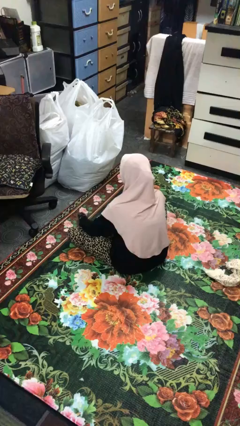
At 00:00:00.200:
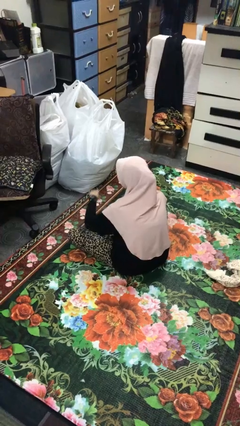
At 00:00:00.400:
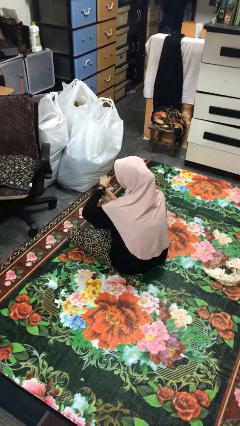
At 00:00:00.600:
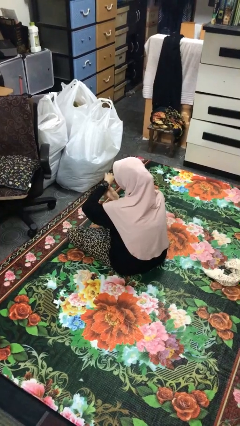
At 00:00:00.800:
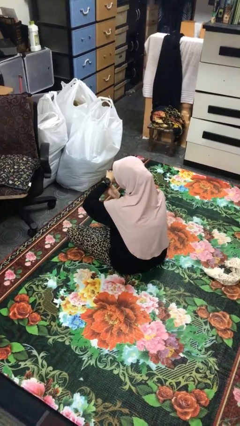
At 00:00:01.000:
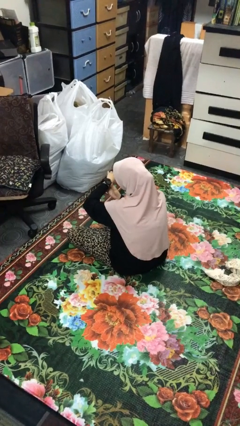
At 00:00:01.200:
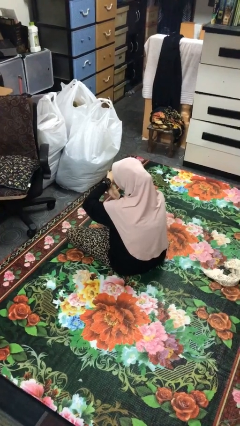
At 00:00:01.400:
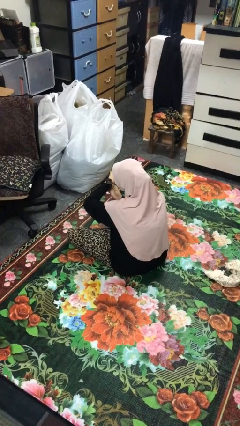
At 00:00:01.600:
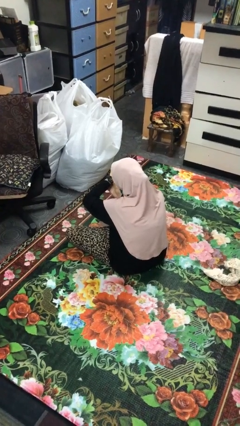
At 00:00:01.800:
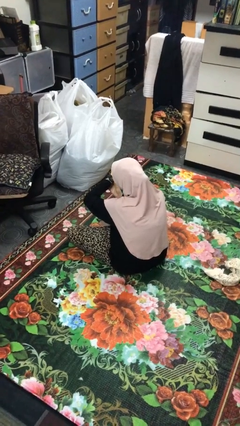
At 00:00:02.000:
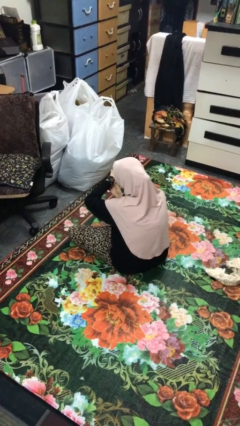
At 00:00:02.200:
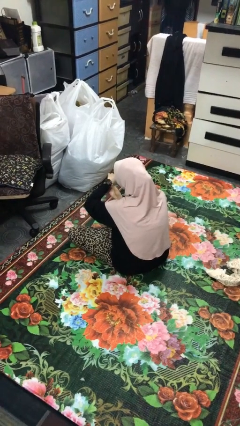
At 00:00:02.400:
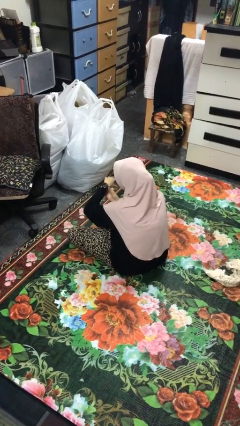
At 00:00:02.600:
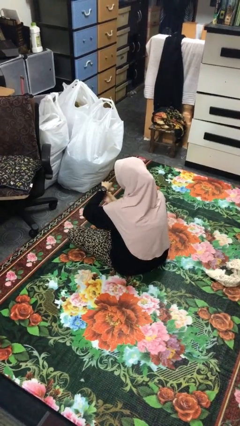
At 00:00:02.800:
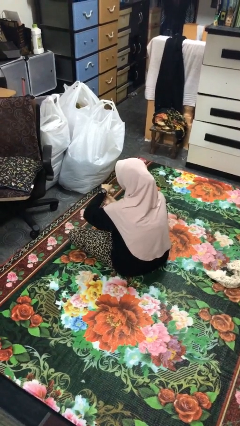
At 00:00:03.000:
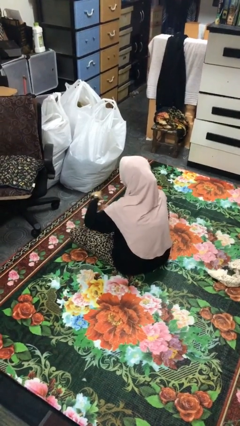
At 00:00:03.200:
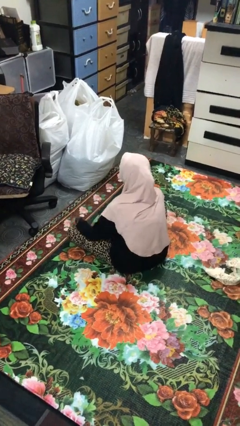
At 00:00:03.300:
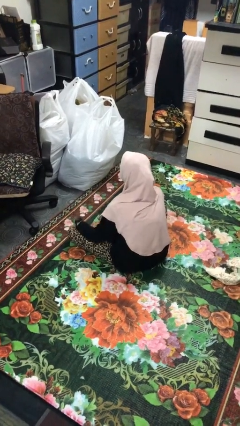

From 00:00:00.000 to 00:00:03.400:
person looks at wristwatch

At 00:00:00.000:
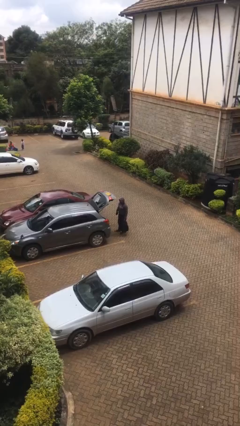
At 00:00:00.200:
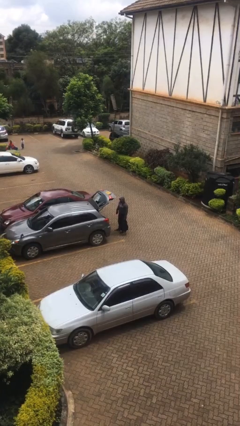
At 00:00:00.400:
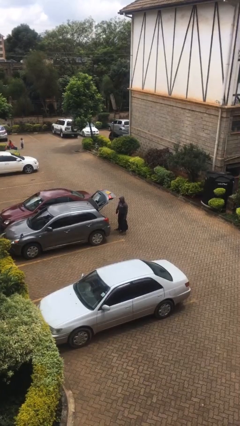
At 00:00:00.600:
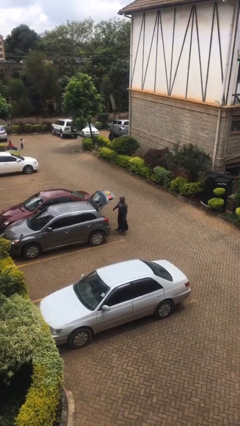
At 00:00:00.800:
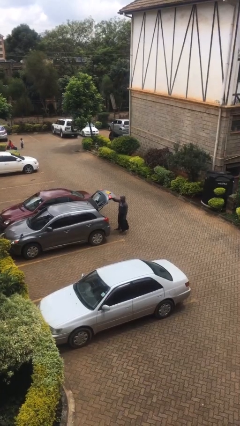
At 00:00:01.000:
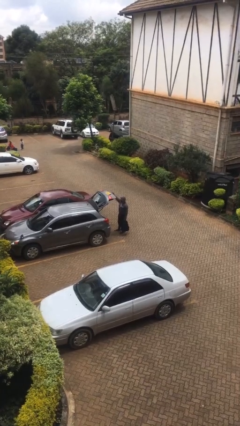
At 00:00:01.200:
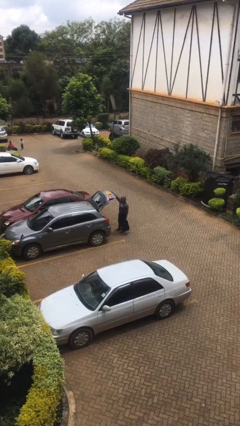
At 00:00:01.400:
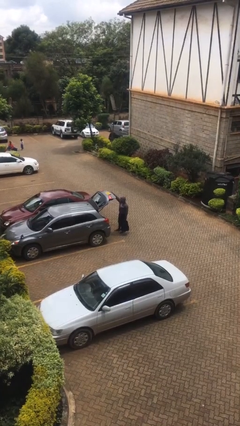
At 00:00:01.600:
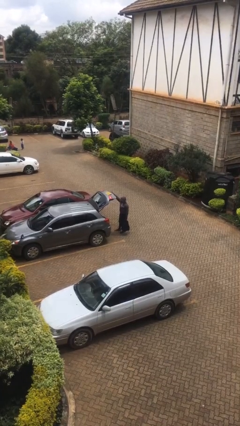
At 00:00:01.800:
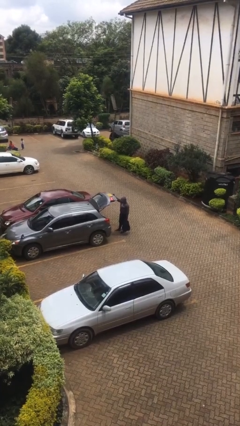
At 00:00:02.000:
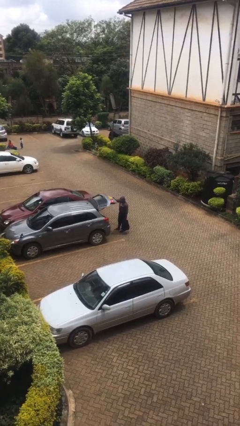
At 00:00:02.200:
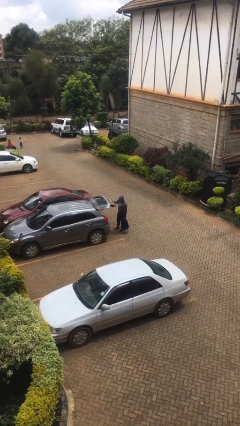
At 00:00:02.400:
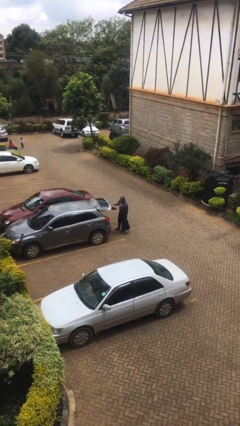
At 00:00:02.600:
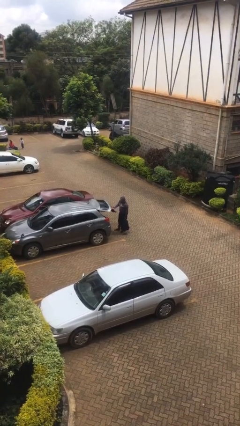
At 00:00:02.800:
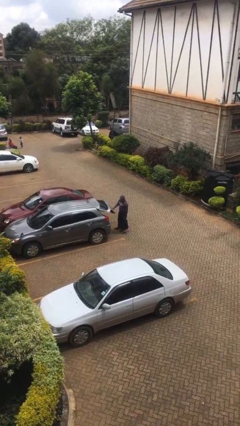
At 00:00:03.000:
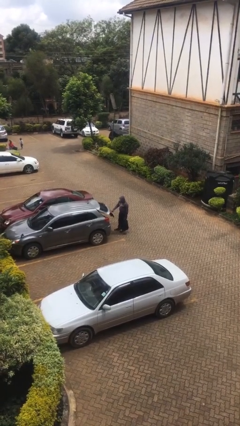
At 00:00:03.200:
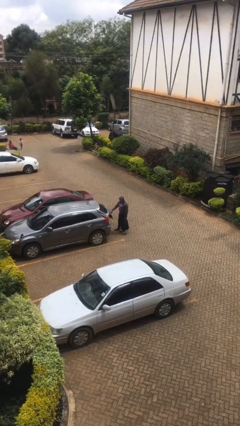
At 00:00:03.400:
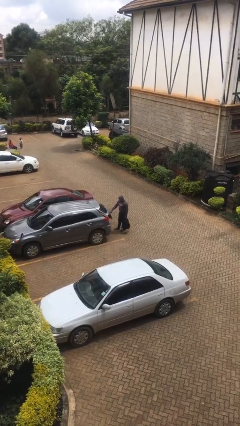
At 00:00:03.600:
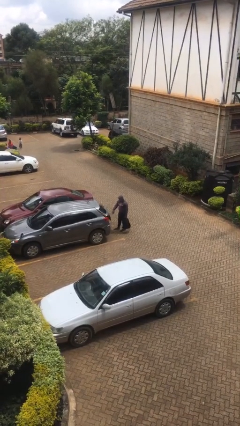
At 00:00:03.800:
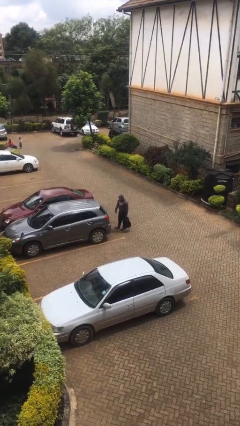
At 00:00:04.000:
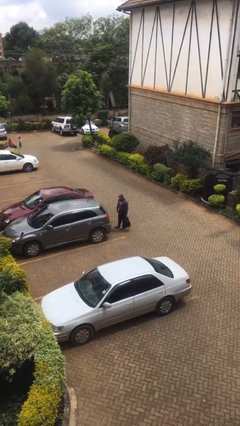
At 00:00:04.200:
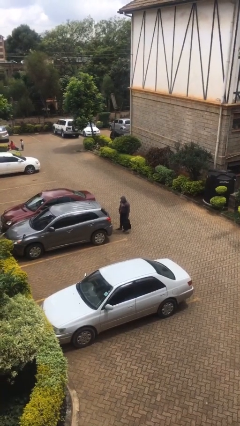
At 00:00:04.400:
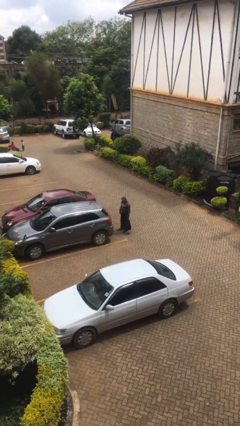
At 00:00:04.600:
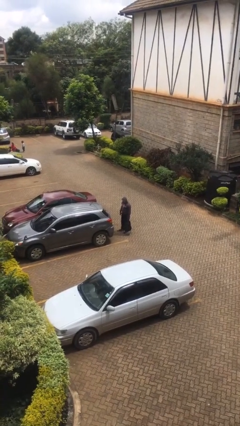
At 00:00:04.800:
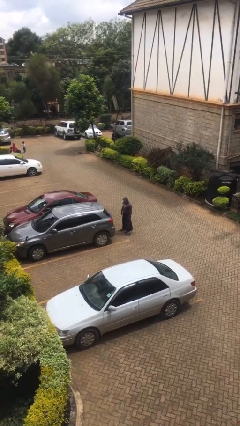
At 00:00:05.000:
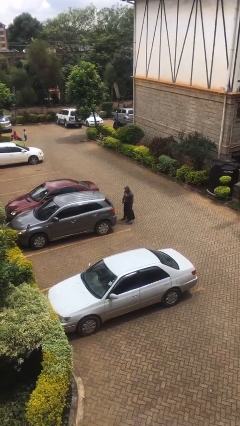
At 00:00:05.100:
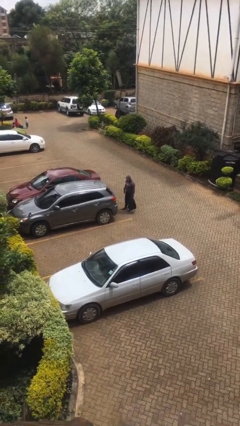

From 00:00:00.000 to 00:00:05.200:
person closes car trunk

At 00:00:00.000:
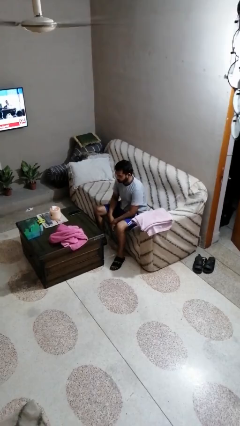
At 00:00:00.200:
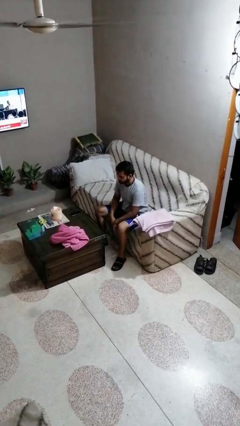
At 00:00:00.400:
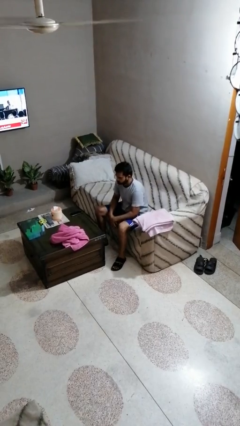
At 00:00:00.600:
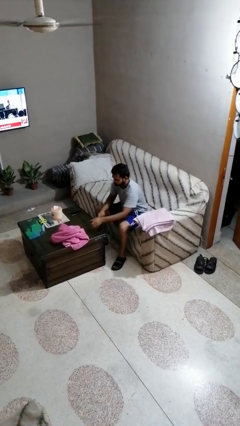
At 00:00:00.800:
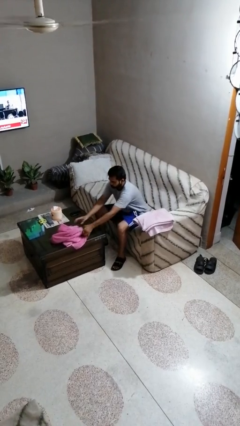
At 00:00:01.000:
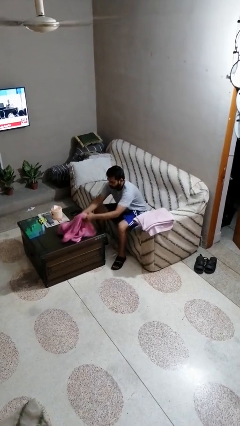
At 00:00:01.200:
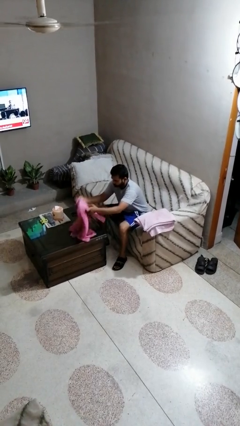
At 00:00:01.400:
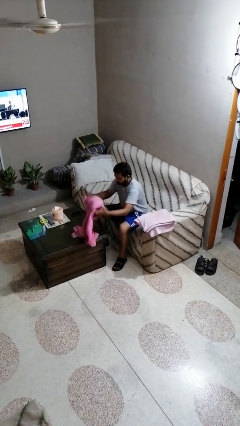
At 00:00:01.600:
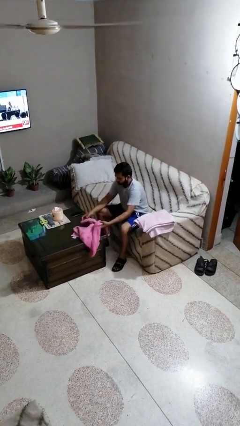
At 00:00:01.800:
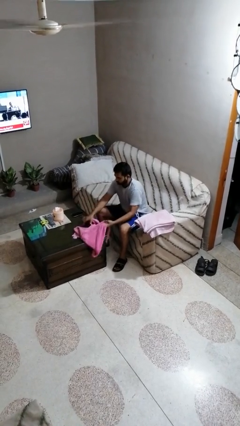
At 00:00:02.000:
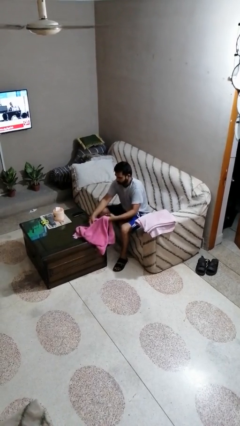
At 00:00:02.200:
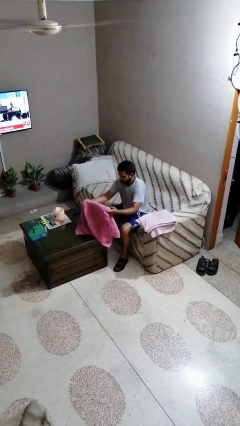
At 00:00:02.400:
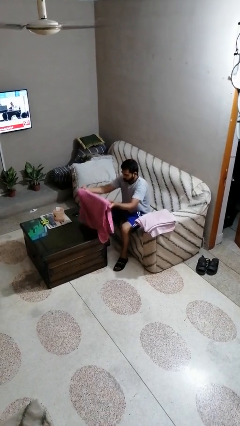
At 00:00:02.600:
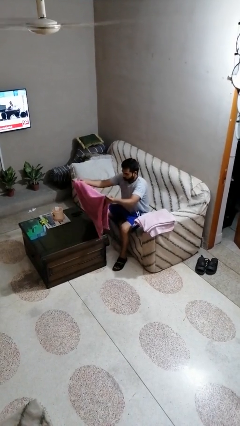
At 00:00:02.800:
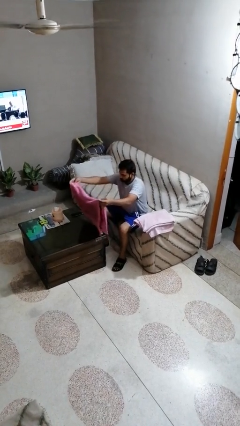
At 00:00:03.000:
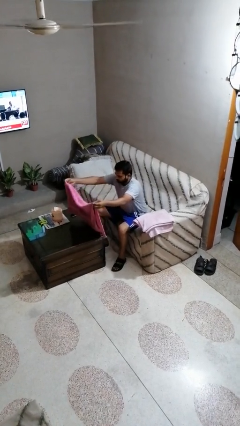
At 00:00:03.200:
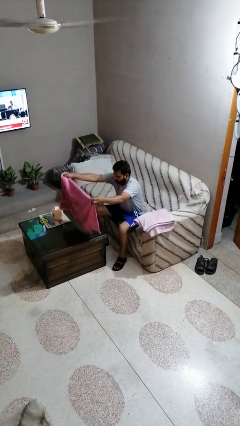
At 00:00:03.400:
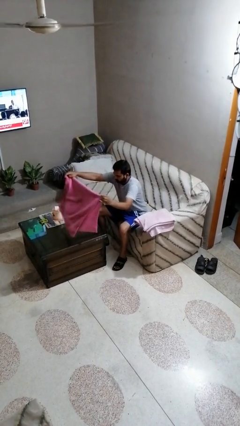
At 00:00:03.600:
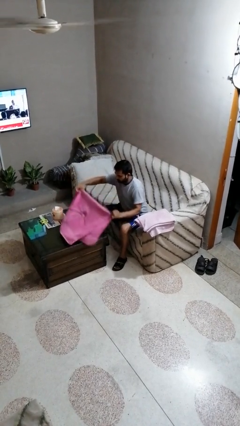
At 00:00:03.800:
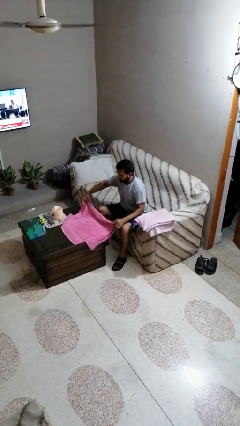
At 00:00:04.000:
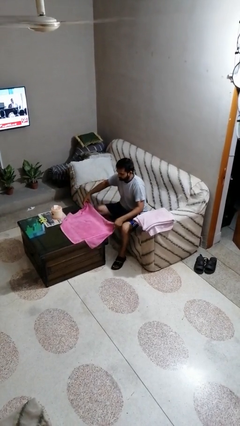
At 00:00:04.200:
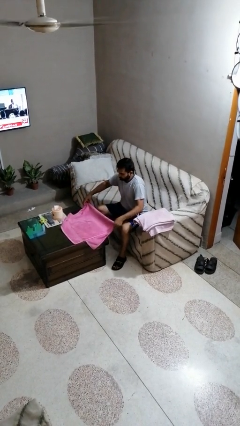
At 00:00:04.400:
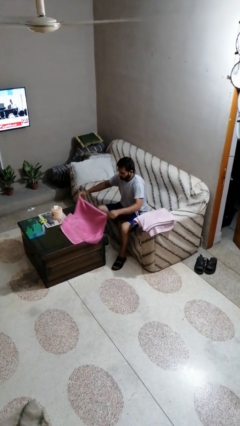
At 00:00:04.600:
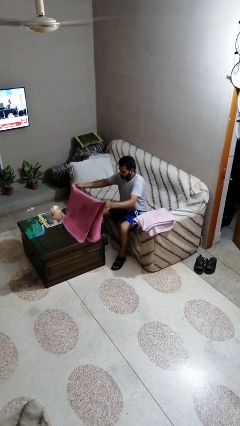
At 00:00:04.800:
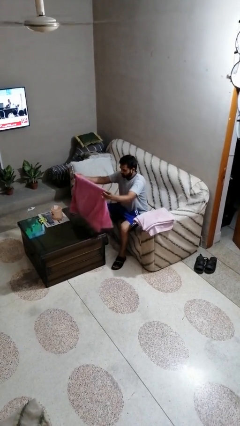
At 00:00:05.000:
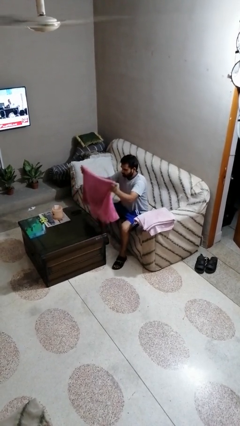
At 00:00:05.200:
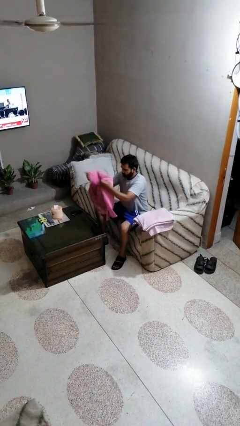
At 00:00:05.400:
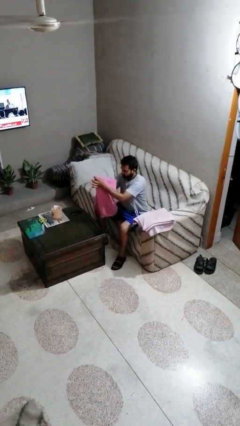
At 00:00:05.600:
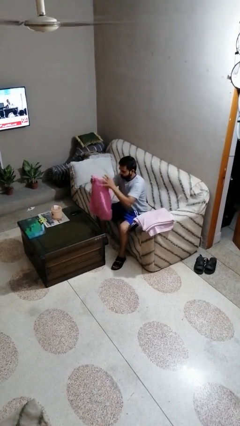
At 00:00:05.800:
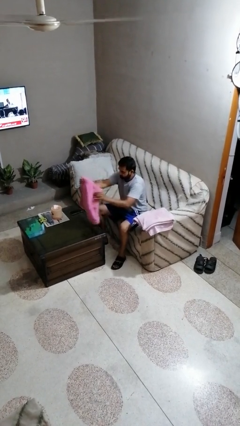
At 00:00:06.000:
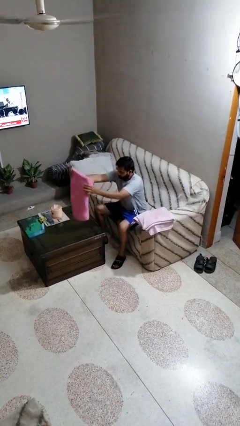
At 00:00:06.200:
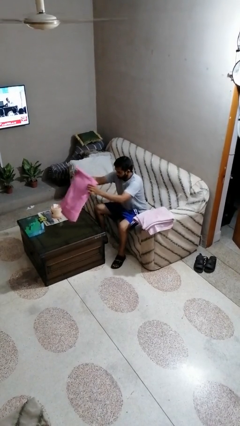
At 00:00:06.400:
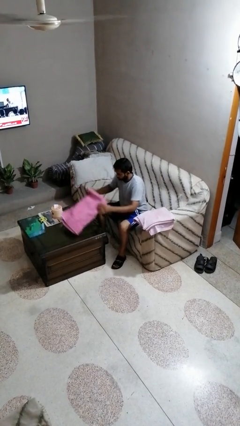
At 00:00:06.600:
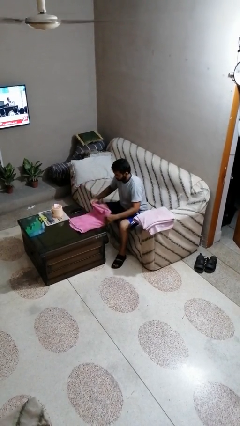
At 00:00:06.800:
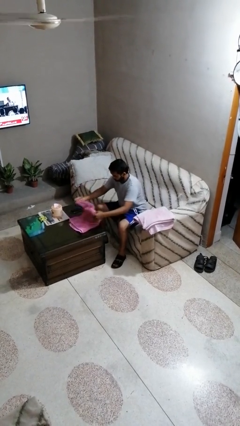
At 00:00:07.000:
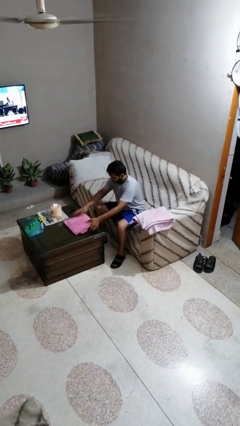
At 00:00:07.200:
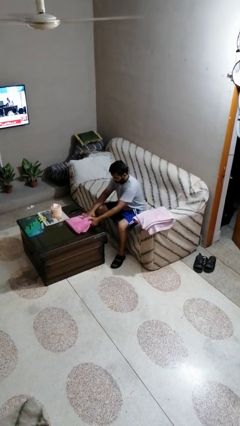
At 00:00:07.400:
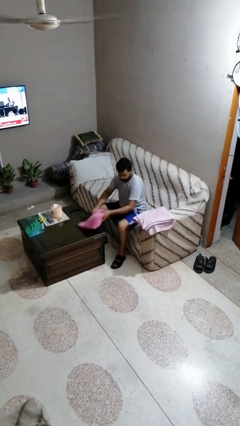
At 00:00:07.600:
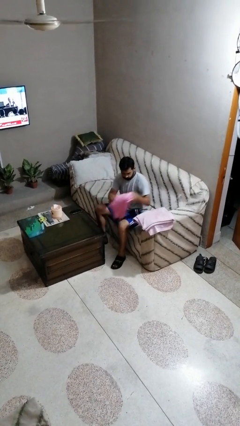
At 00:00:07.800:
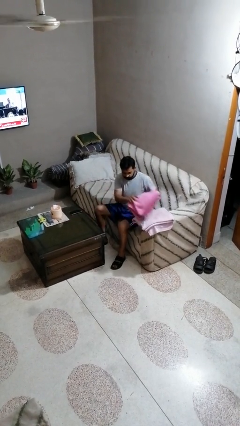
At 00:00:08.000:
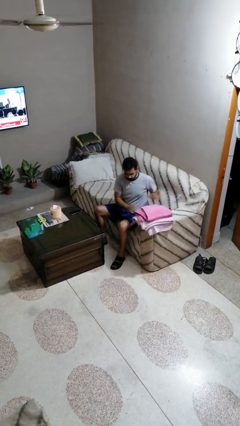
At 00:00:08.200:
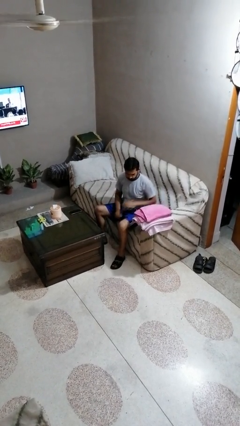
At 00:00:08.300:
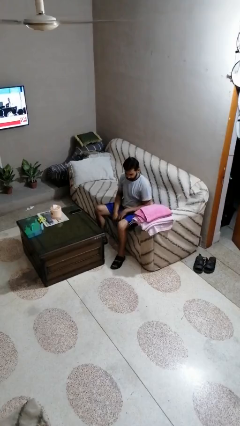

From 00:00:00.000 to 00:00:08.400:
person folds towel

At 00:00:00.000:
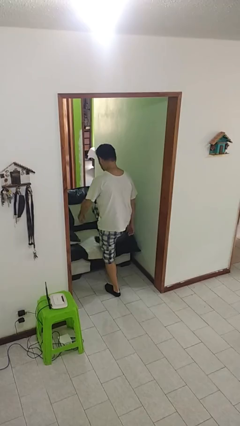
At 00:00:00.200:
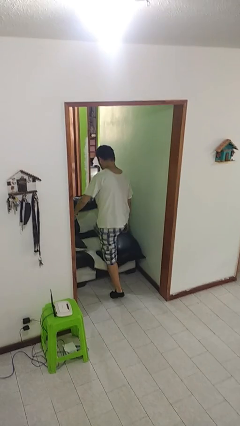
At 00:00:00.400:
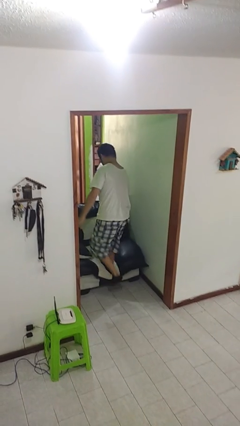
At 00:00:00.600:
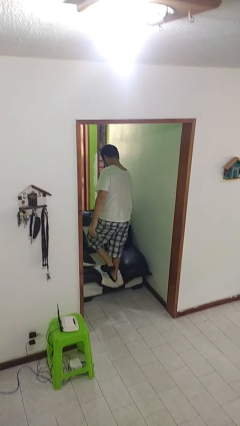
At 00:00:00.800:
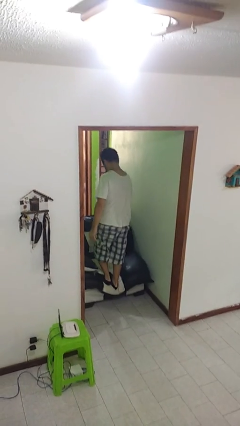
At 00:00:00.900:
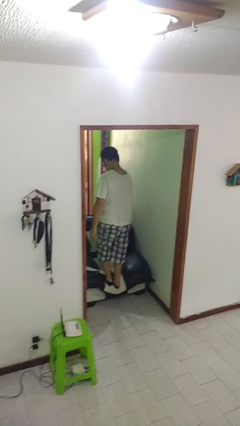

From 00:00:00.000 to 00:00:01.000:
person climbs on couch
